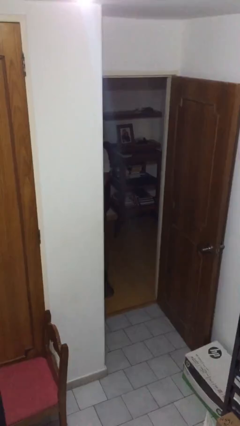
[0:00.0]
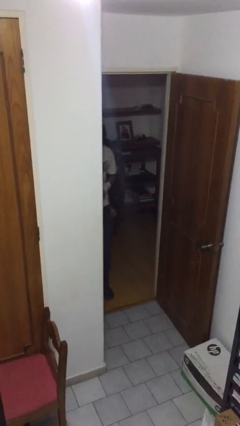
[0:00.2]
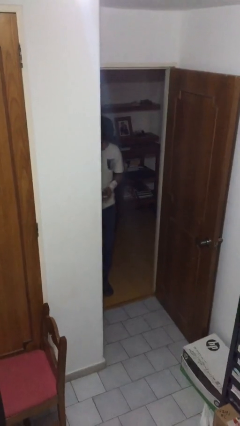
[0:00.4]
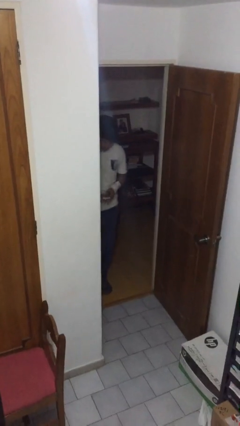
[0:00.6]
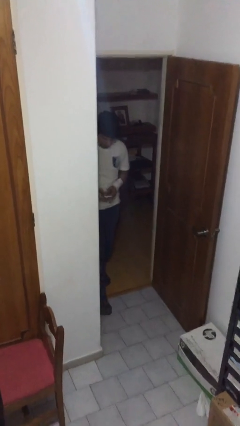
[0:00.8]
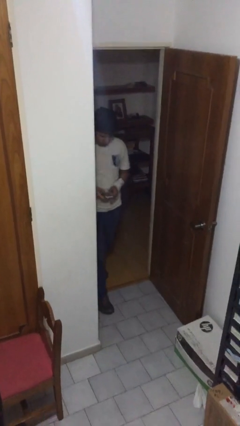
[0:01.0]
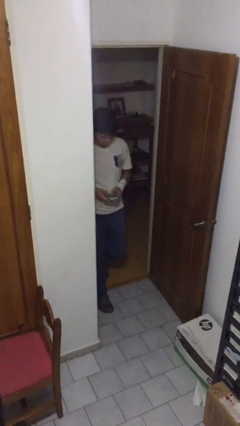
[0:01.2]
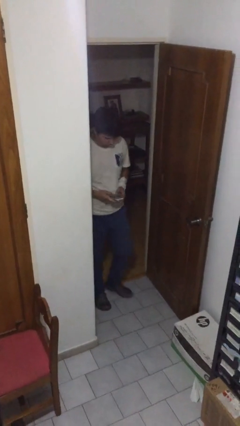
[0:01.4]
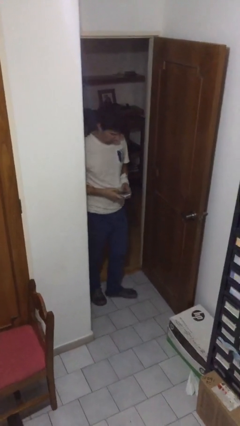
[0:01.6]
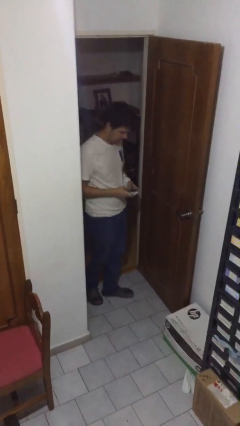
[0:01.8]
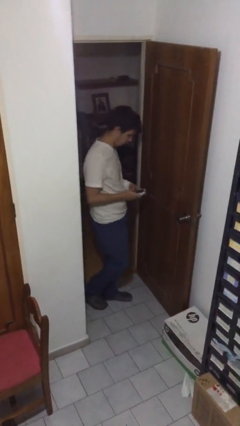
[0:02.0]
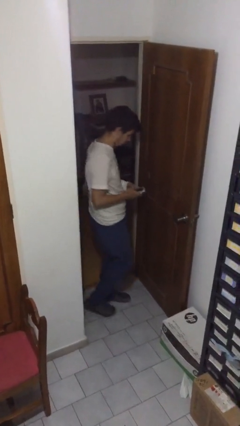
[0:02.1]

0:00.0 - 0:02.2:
person enters scene through structure

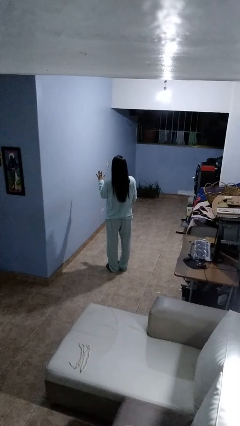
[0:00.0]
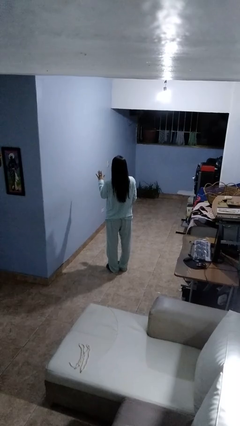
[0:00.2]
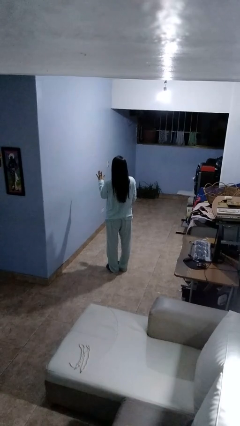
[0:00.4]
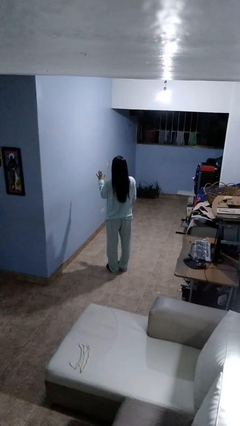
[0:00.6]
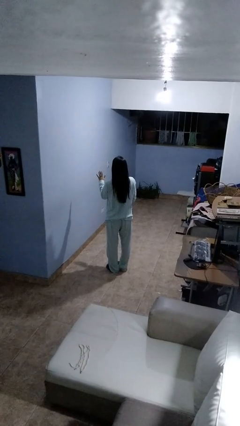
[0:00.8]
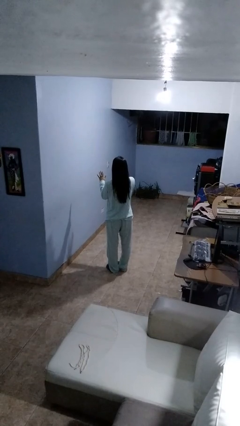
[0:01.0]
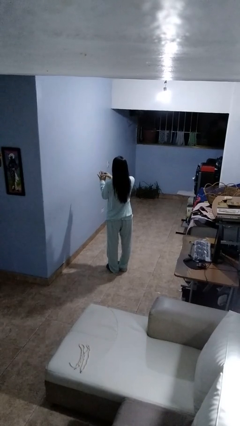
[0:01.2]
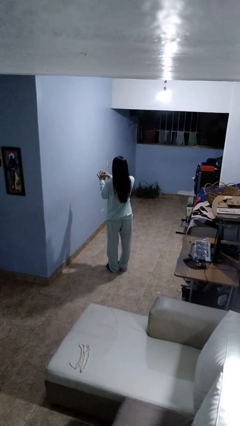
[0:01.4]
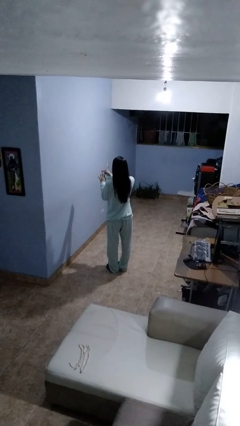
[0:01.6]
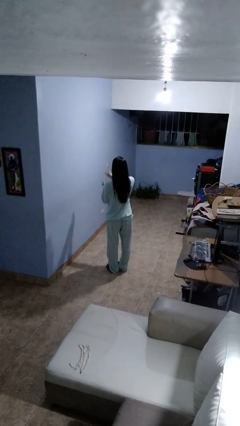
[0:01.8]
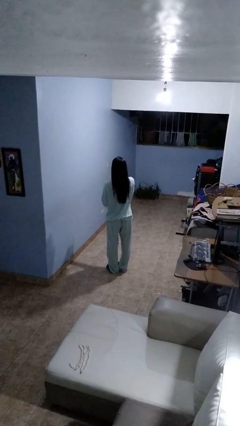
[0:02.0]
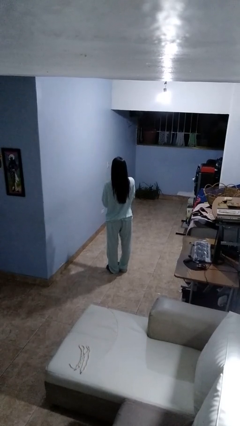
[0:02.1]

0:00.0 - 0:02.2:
person takes off ring

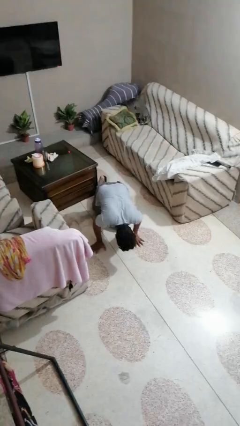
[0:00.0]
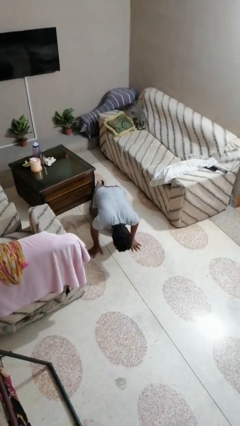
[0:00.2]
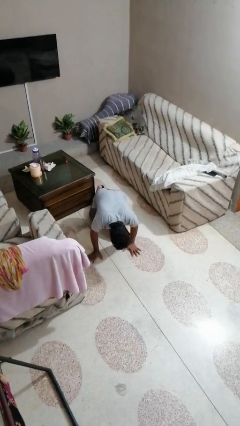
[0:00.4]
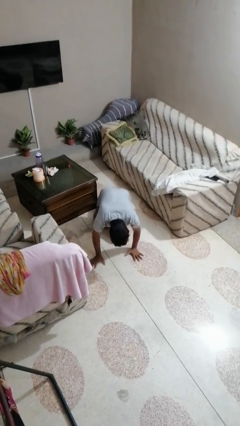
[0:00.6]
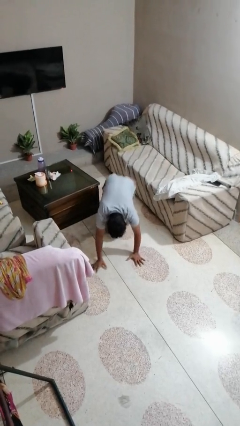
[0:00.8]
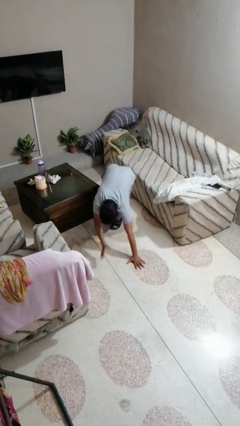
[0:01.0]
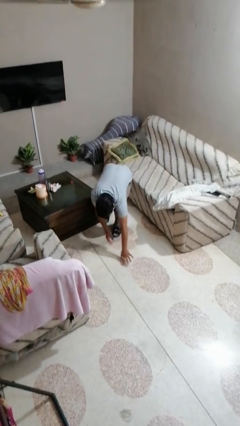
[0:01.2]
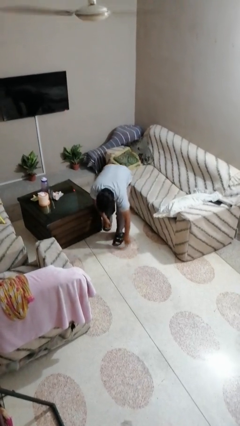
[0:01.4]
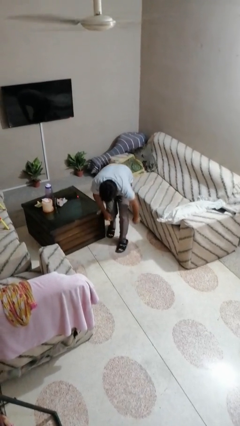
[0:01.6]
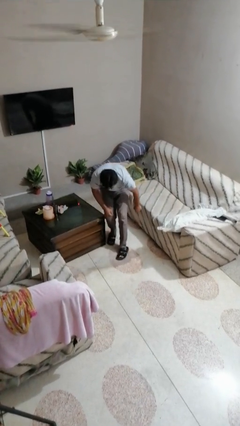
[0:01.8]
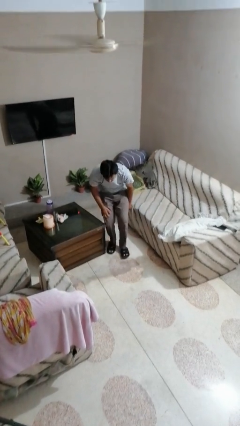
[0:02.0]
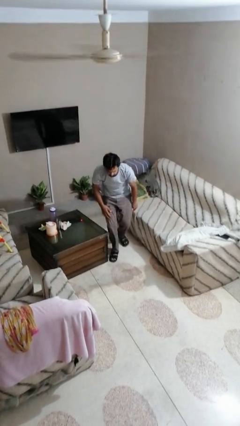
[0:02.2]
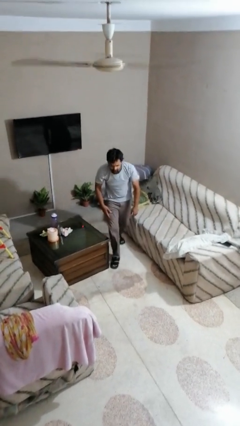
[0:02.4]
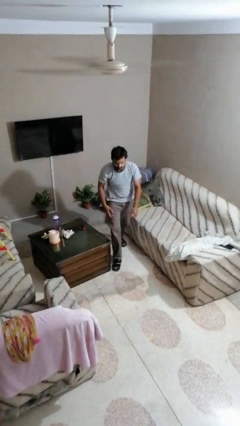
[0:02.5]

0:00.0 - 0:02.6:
person stands up from floor

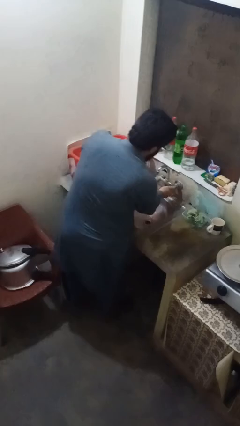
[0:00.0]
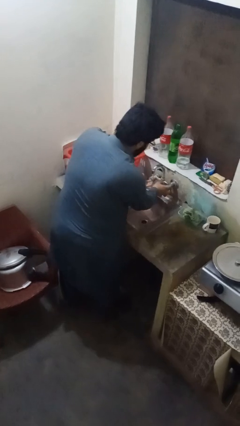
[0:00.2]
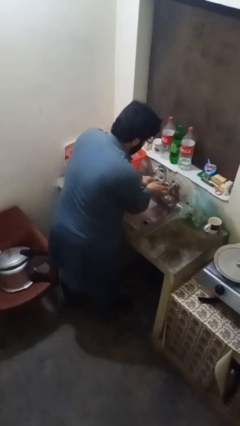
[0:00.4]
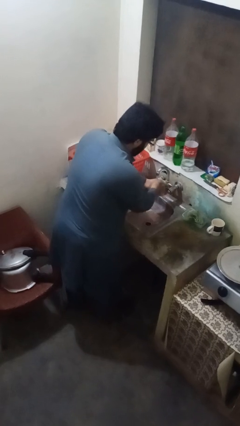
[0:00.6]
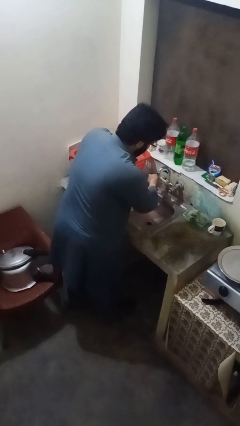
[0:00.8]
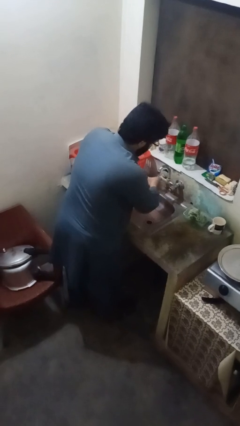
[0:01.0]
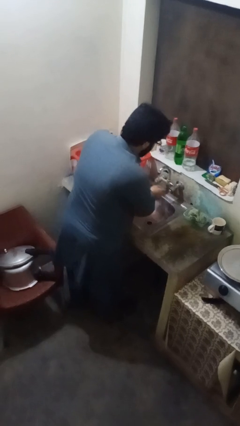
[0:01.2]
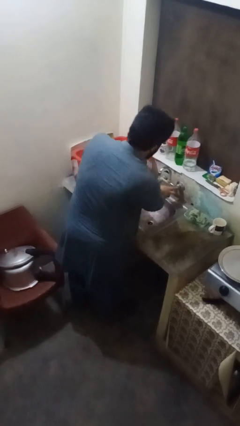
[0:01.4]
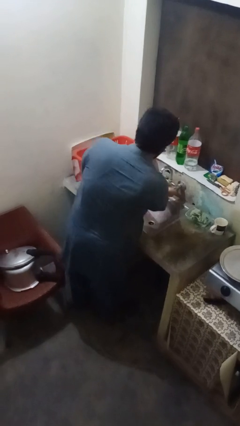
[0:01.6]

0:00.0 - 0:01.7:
person washes hands

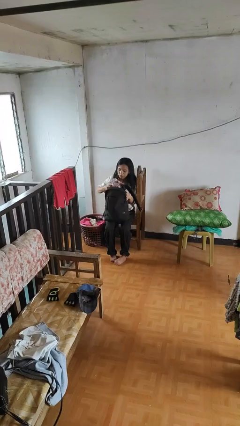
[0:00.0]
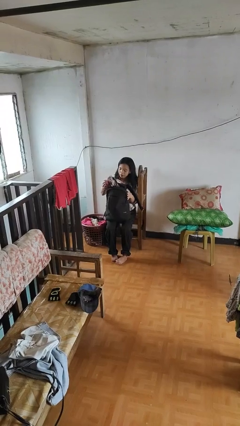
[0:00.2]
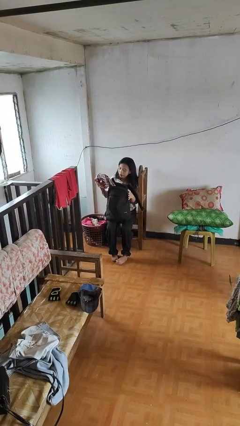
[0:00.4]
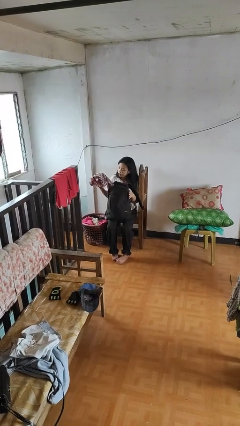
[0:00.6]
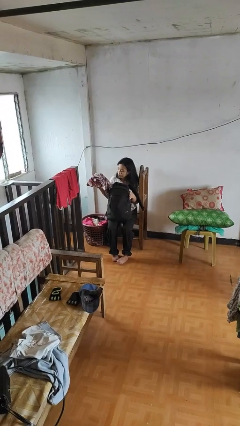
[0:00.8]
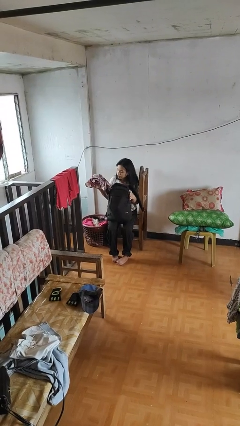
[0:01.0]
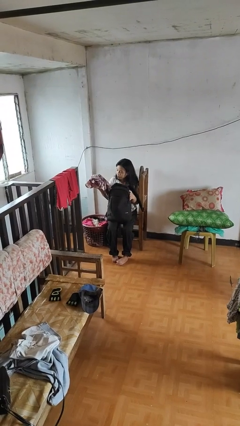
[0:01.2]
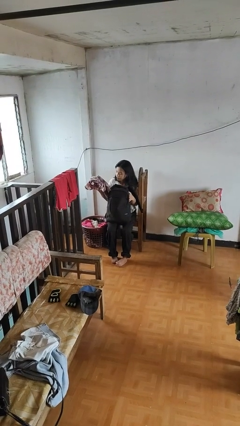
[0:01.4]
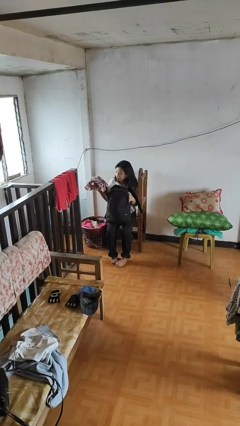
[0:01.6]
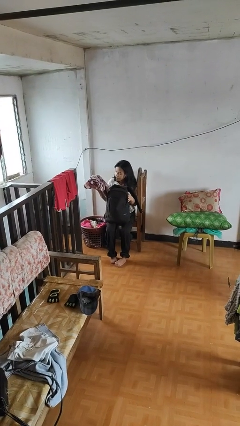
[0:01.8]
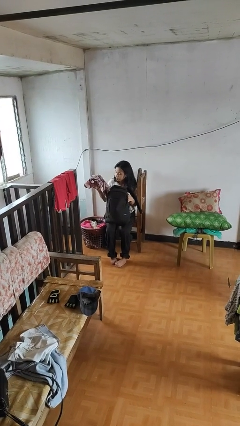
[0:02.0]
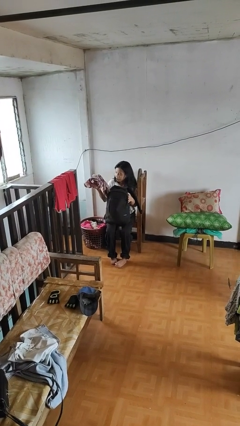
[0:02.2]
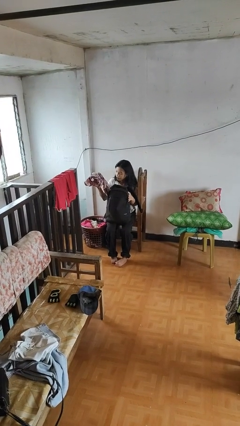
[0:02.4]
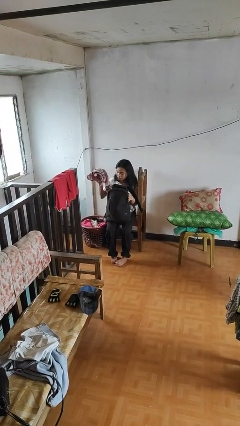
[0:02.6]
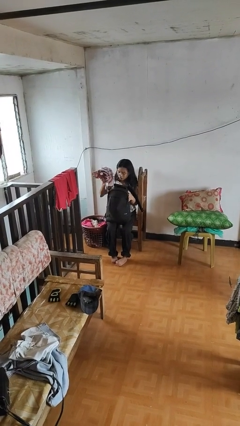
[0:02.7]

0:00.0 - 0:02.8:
person takes object from backpack

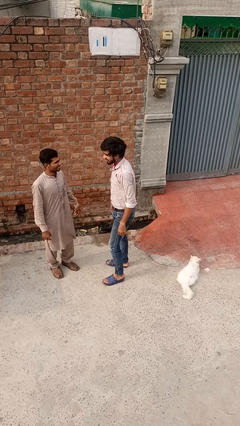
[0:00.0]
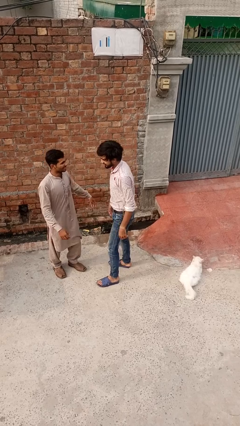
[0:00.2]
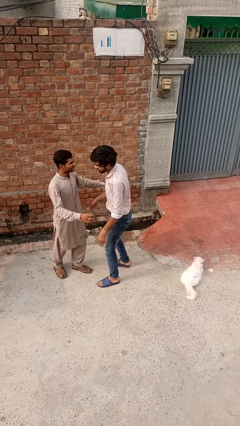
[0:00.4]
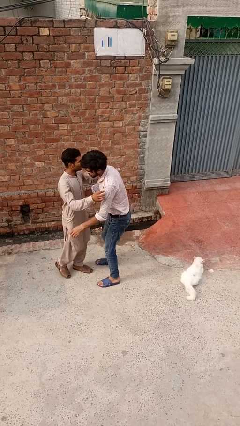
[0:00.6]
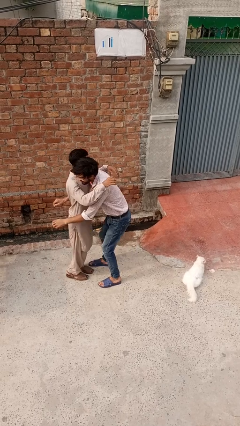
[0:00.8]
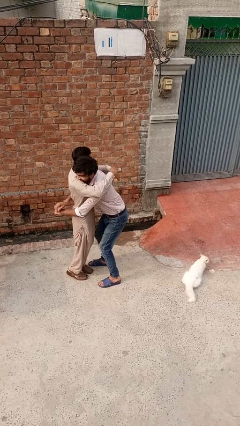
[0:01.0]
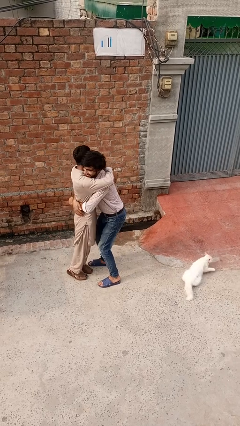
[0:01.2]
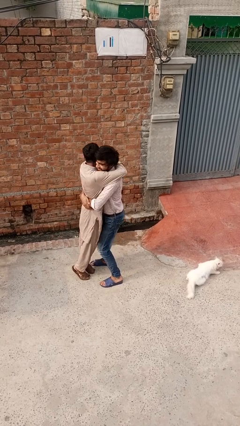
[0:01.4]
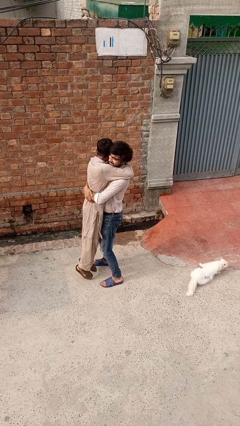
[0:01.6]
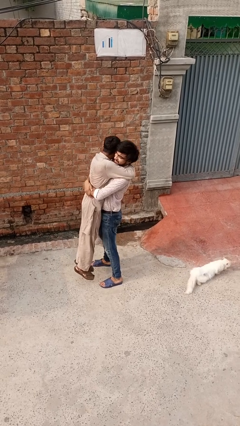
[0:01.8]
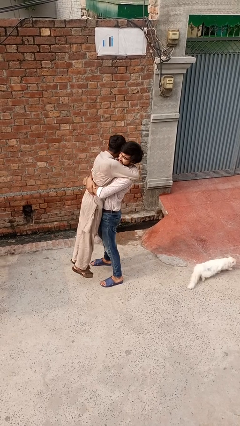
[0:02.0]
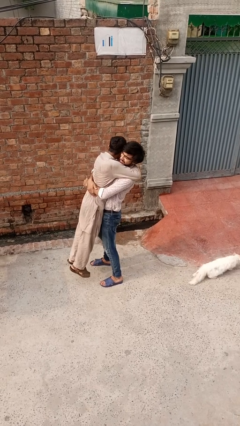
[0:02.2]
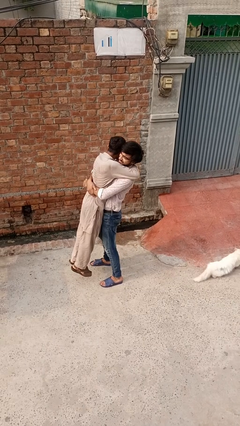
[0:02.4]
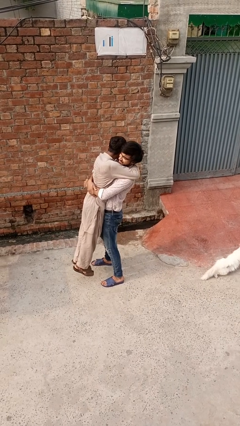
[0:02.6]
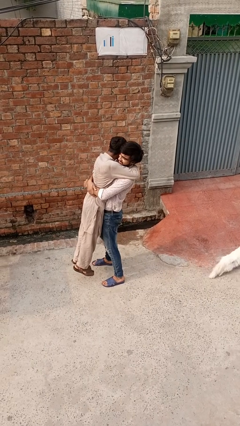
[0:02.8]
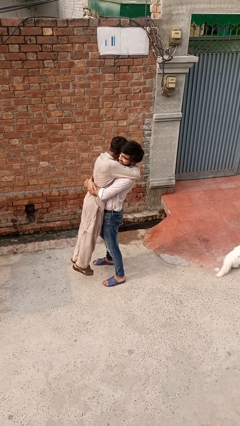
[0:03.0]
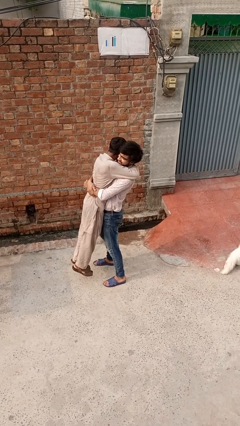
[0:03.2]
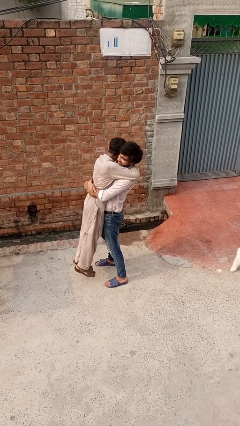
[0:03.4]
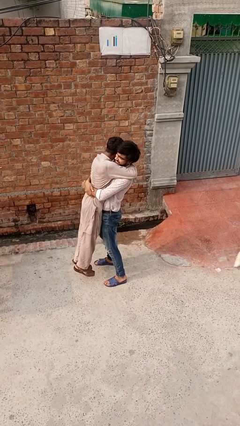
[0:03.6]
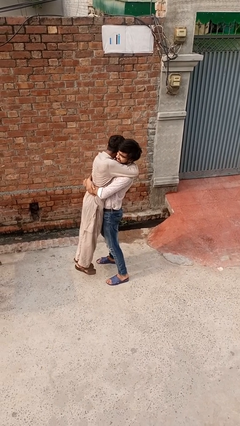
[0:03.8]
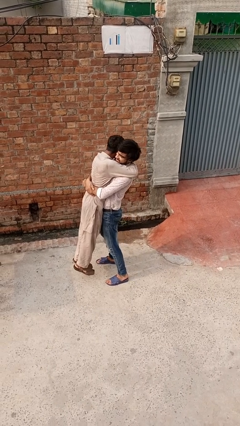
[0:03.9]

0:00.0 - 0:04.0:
person picks up person

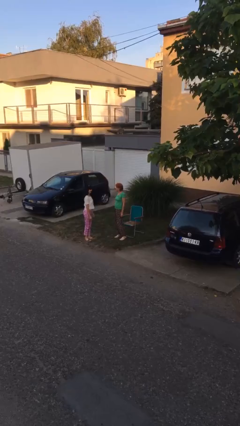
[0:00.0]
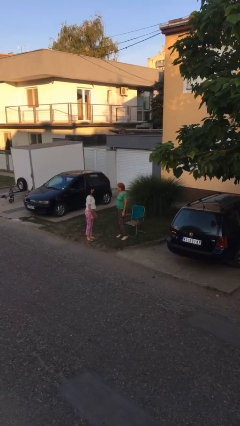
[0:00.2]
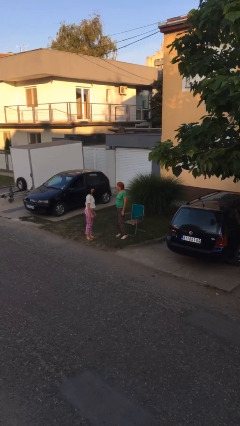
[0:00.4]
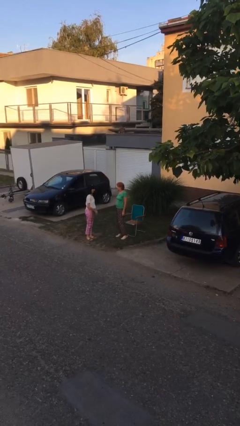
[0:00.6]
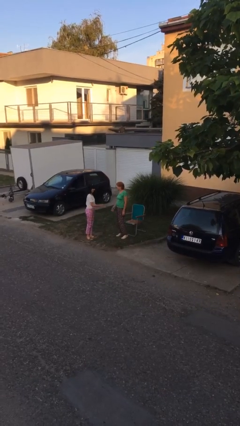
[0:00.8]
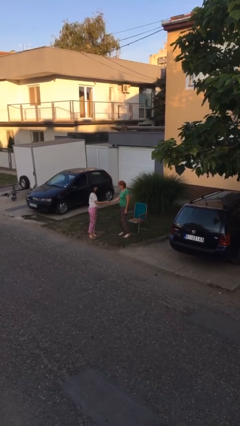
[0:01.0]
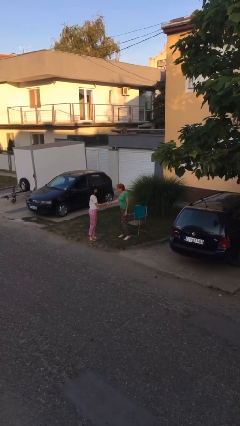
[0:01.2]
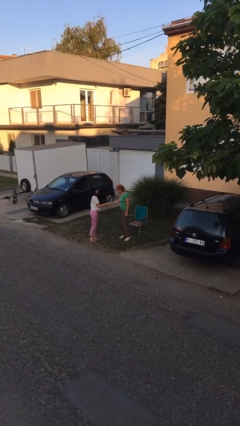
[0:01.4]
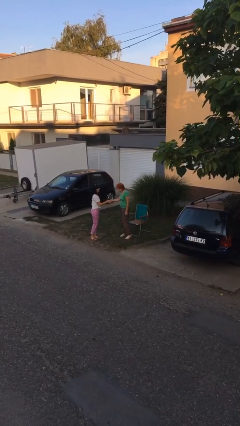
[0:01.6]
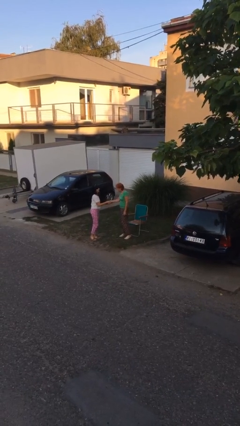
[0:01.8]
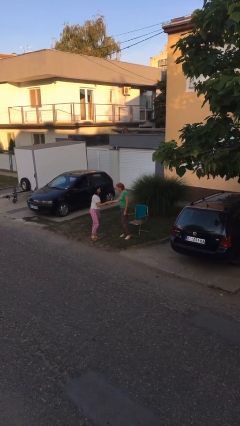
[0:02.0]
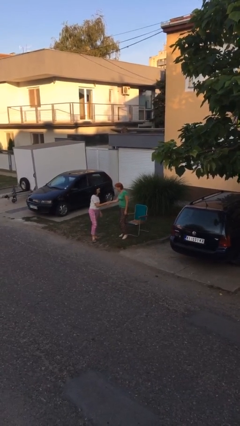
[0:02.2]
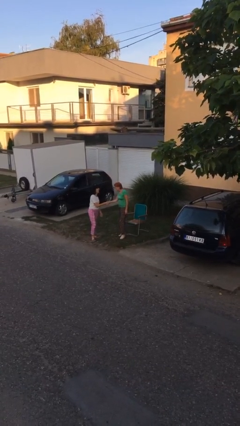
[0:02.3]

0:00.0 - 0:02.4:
person shakes hand
